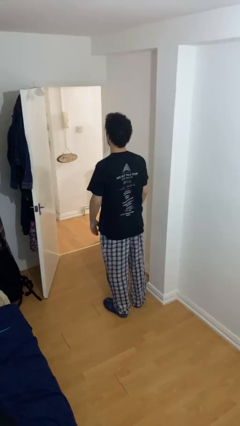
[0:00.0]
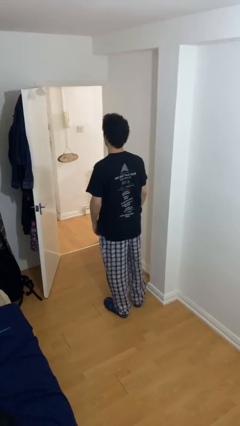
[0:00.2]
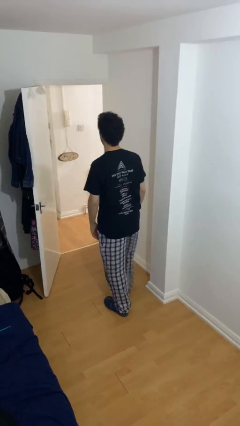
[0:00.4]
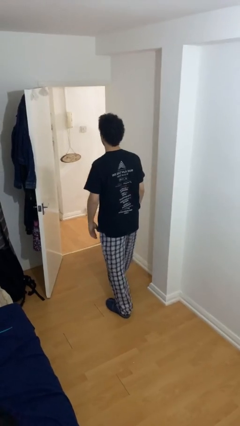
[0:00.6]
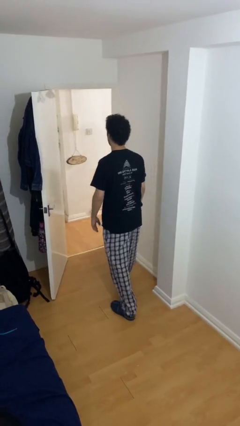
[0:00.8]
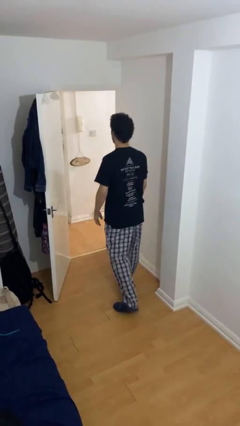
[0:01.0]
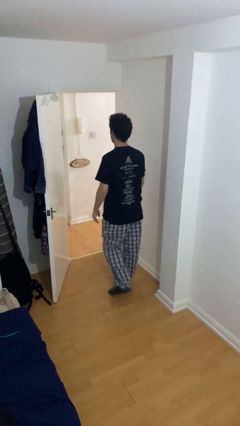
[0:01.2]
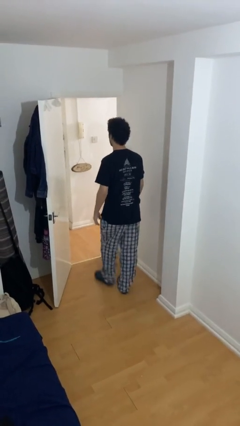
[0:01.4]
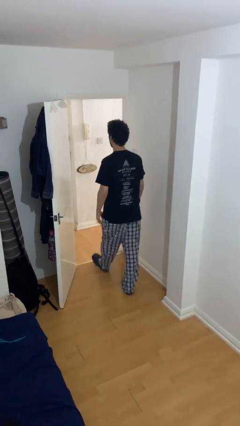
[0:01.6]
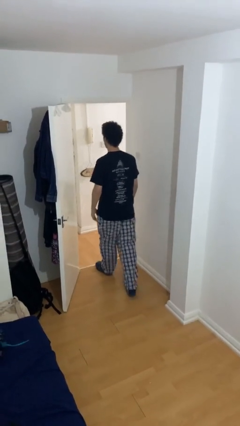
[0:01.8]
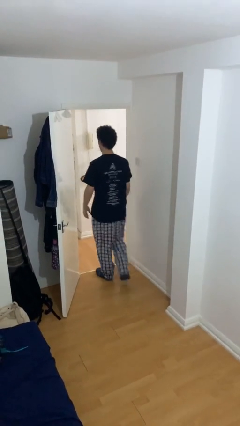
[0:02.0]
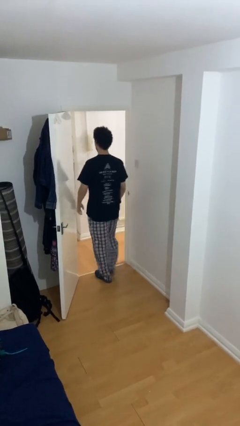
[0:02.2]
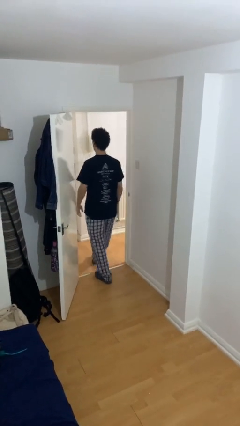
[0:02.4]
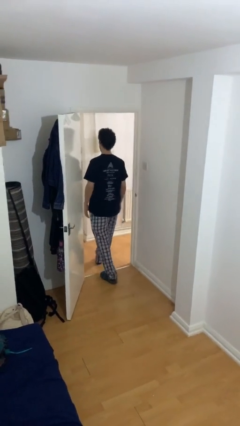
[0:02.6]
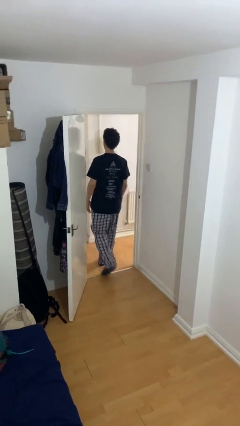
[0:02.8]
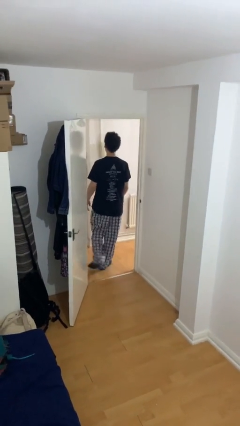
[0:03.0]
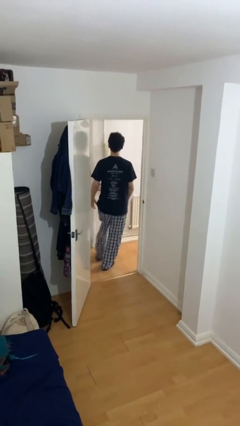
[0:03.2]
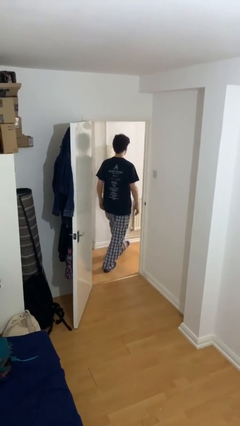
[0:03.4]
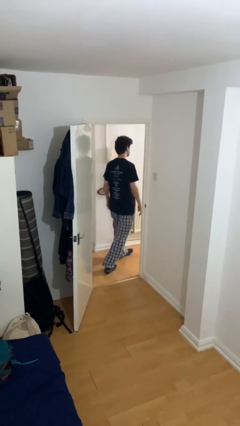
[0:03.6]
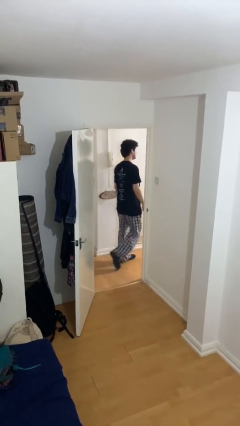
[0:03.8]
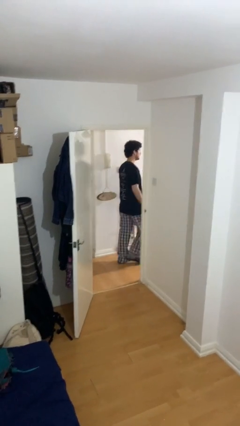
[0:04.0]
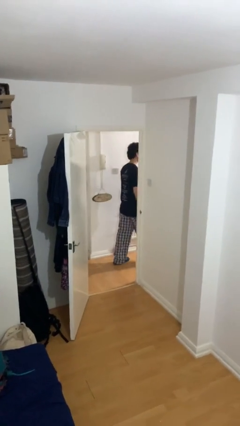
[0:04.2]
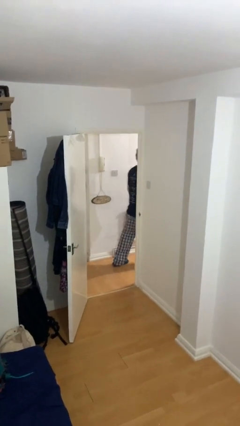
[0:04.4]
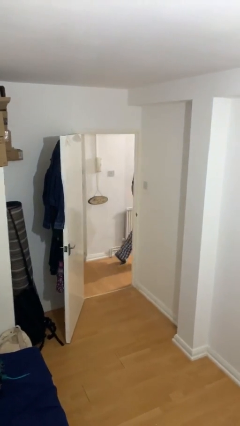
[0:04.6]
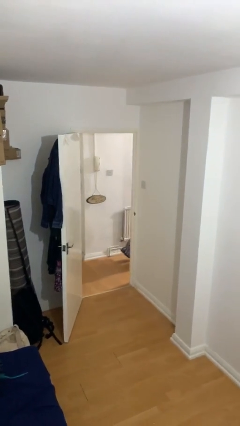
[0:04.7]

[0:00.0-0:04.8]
person exits scene through structure

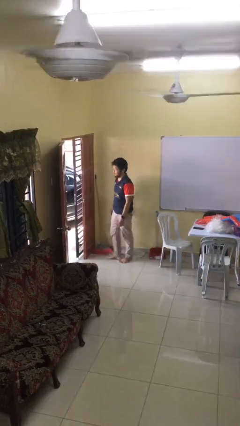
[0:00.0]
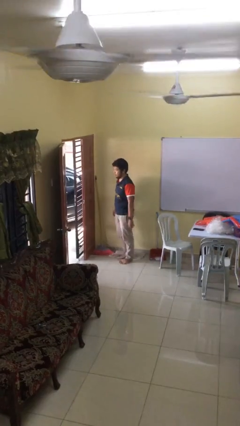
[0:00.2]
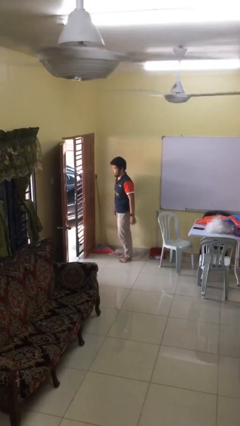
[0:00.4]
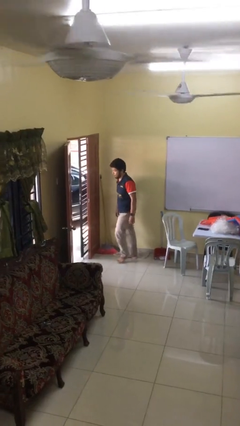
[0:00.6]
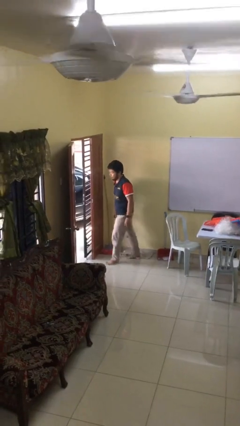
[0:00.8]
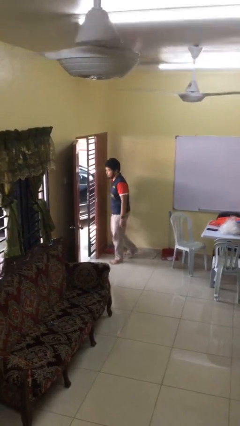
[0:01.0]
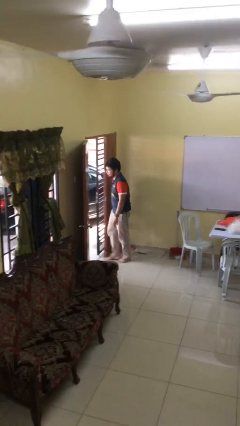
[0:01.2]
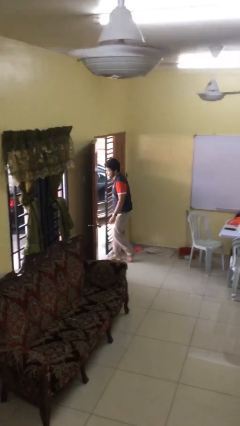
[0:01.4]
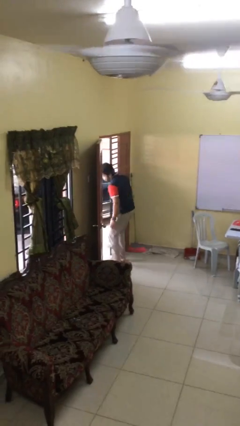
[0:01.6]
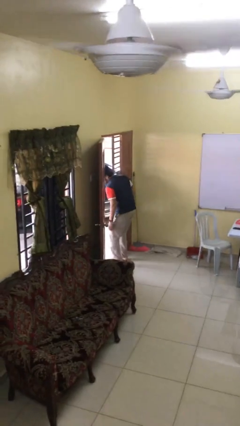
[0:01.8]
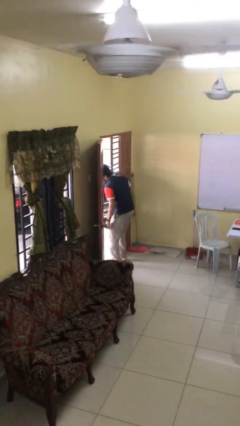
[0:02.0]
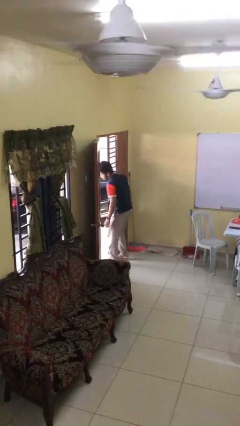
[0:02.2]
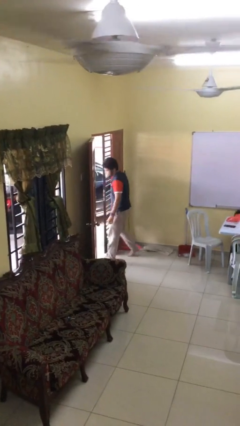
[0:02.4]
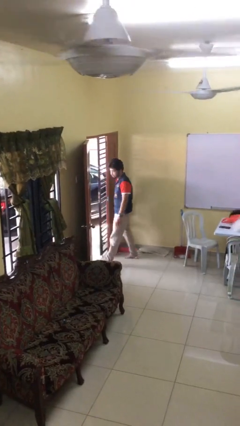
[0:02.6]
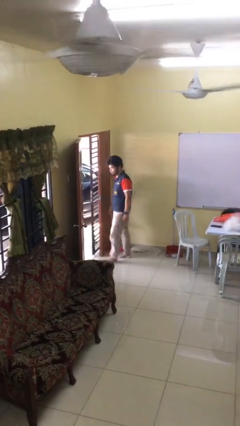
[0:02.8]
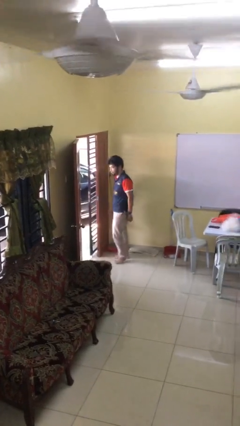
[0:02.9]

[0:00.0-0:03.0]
person bumps into wall

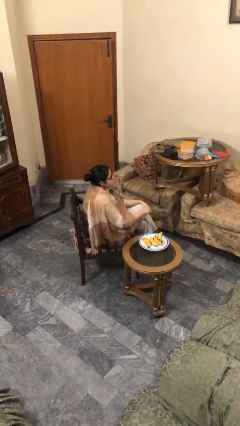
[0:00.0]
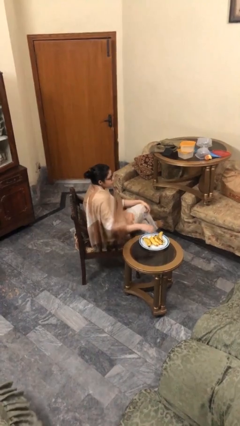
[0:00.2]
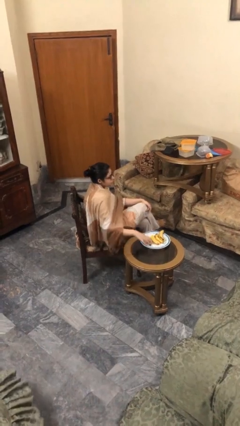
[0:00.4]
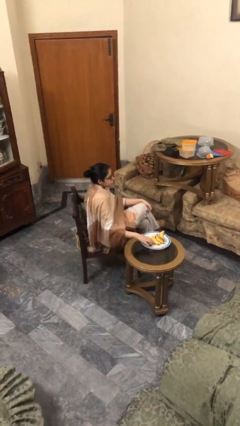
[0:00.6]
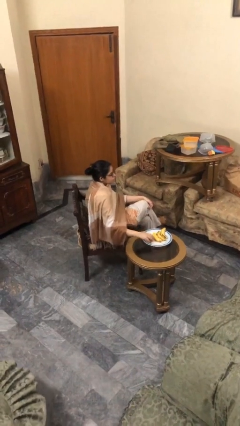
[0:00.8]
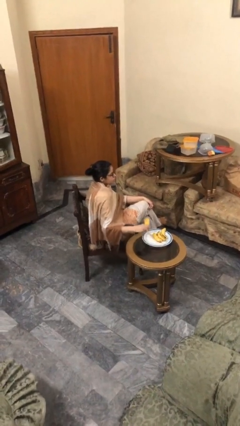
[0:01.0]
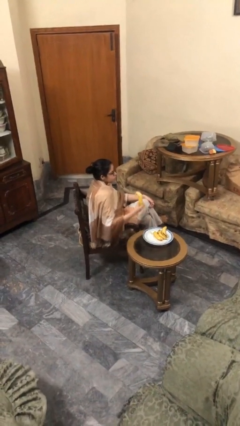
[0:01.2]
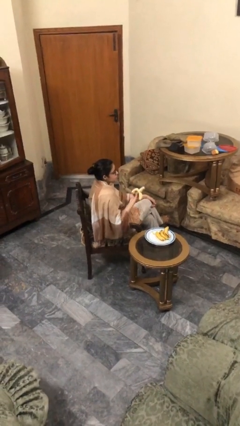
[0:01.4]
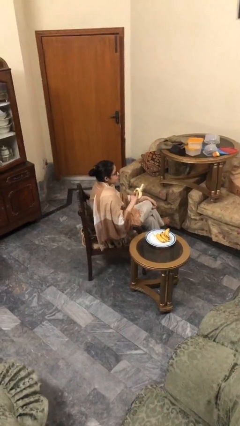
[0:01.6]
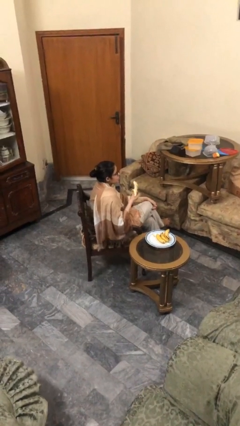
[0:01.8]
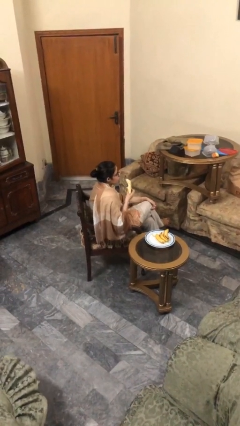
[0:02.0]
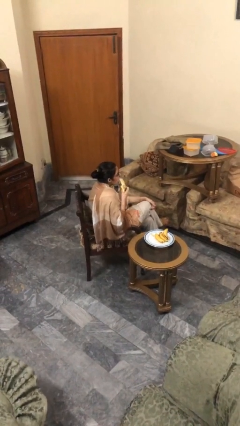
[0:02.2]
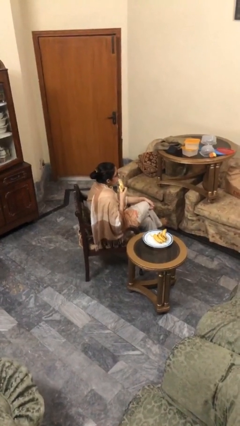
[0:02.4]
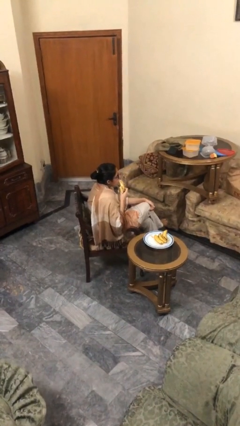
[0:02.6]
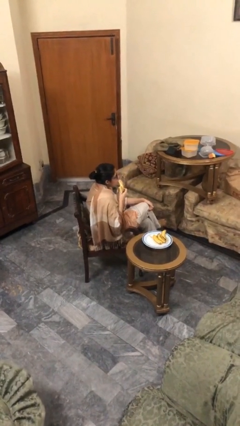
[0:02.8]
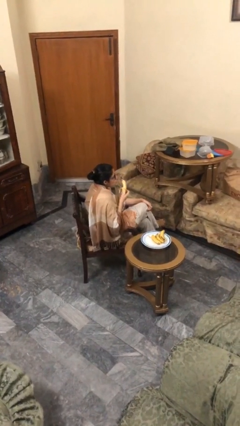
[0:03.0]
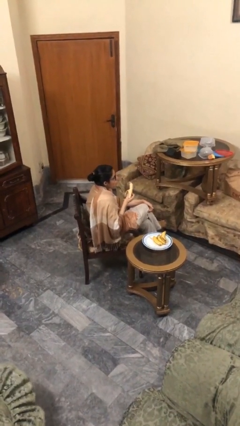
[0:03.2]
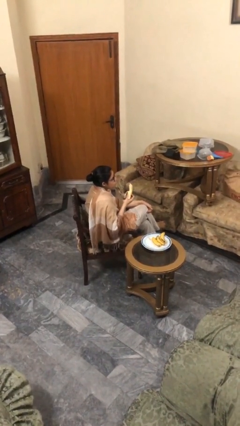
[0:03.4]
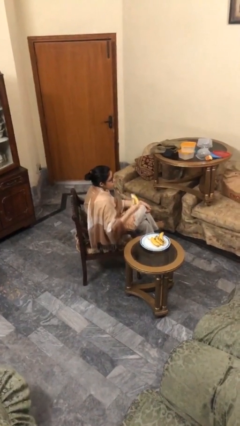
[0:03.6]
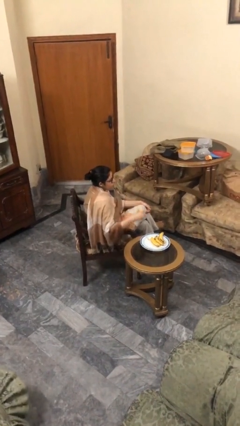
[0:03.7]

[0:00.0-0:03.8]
person eats banana

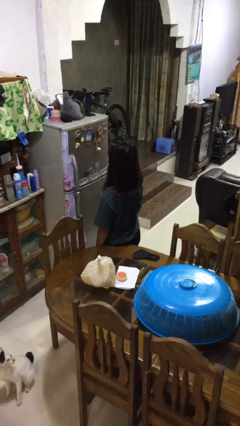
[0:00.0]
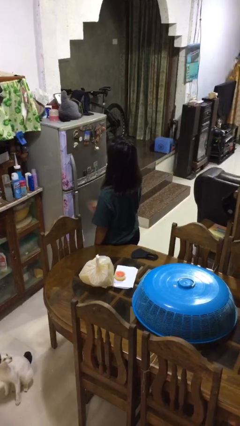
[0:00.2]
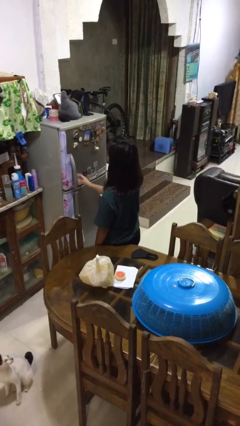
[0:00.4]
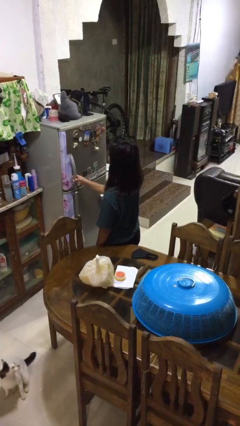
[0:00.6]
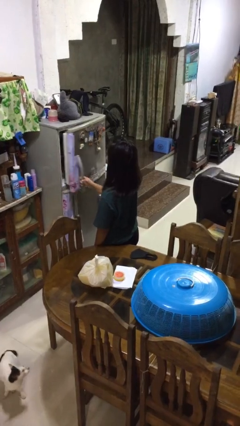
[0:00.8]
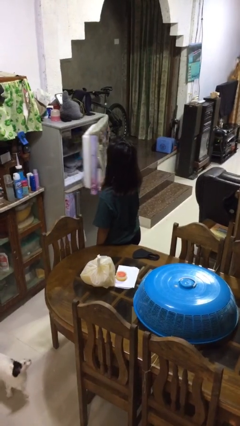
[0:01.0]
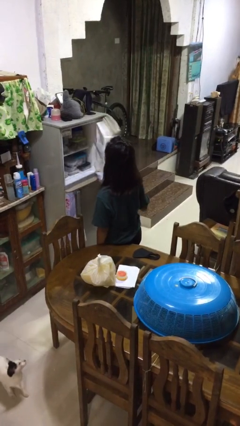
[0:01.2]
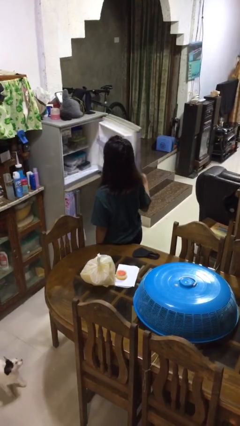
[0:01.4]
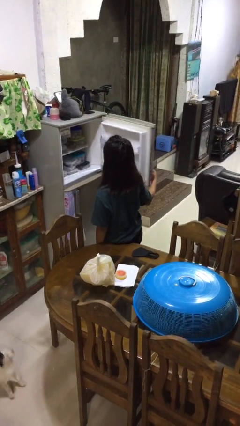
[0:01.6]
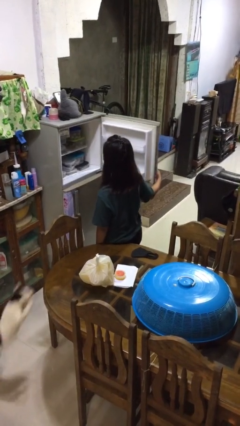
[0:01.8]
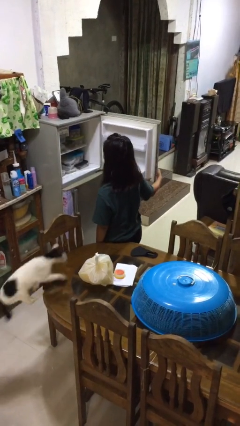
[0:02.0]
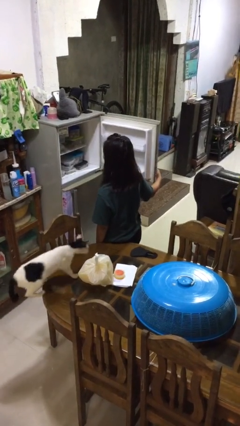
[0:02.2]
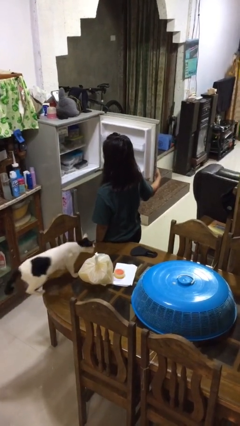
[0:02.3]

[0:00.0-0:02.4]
person opens refrigerator

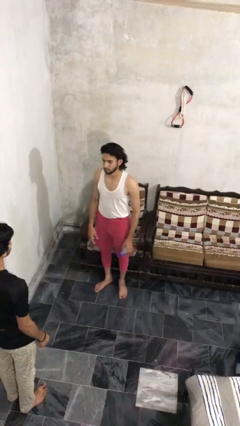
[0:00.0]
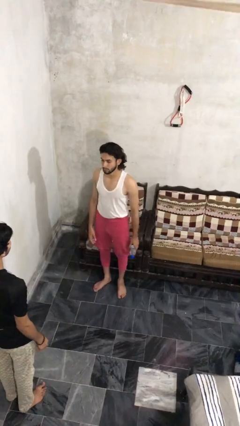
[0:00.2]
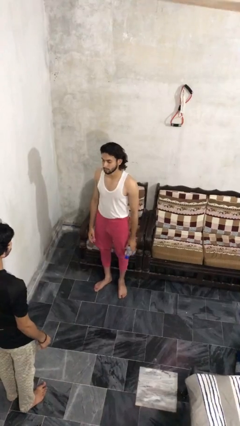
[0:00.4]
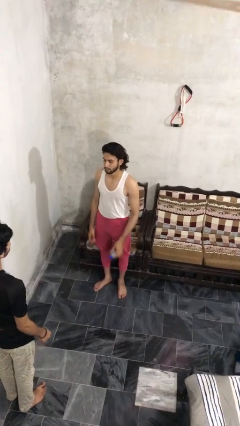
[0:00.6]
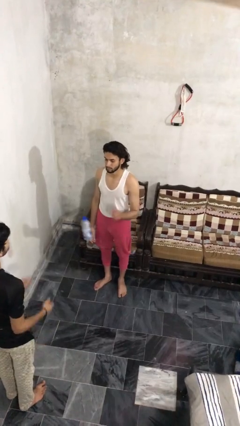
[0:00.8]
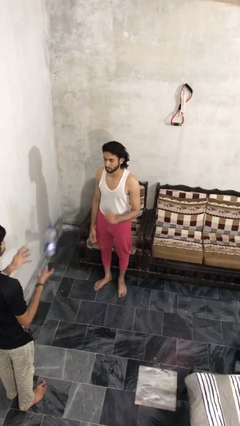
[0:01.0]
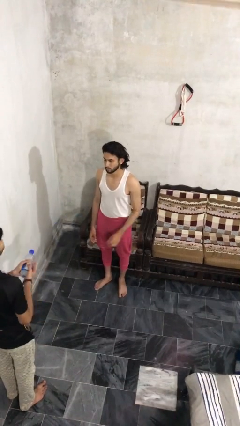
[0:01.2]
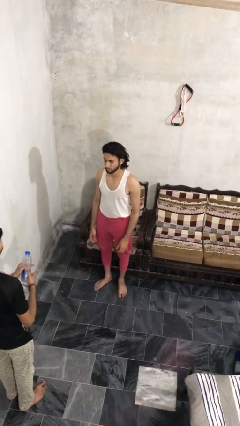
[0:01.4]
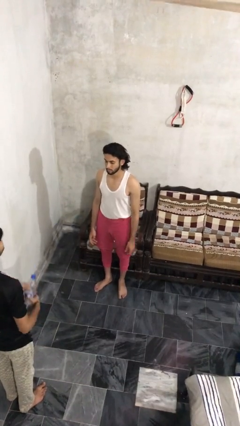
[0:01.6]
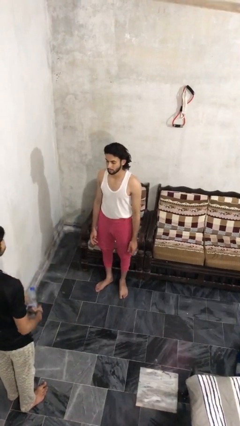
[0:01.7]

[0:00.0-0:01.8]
person throws object to person

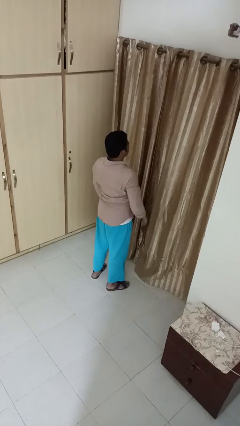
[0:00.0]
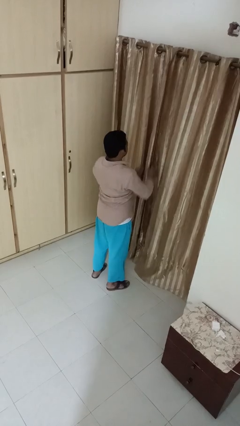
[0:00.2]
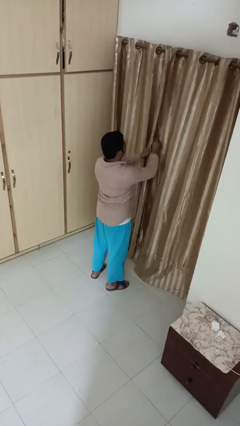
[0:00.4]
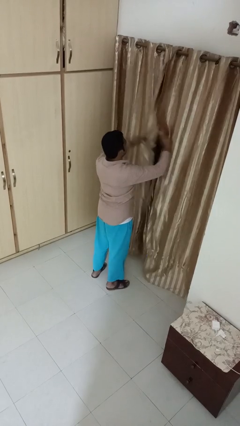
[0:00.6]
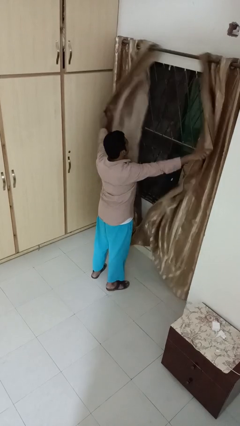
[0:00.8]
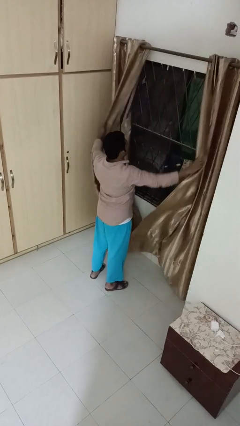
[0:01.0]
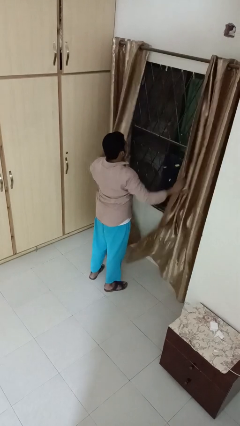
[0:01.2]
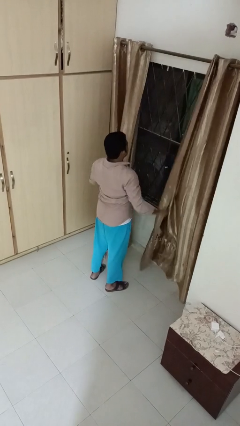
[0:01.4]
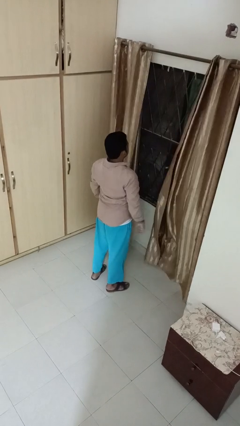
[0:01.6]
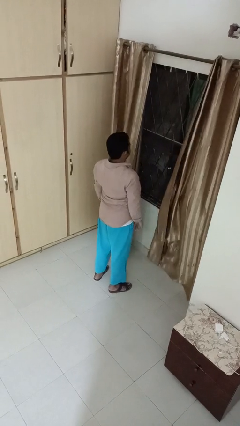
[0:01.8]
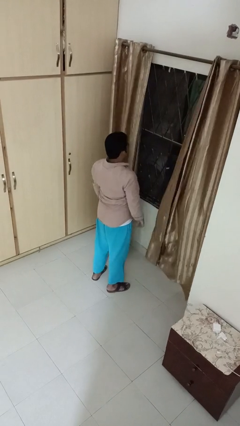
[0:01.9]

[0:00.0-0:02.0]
person opens curtains
